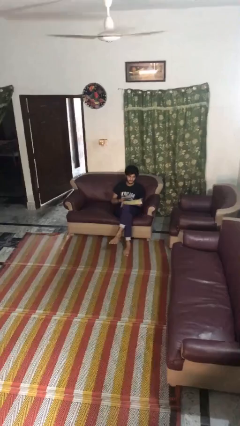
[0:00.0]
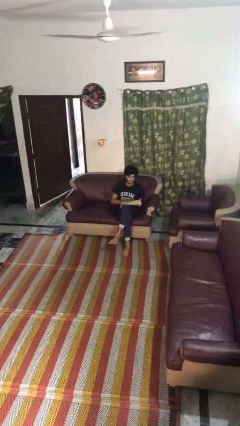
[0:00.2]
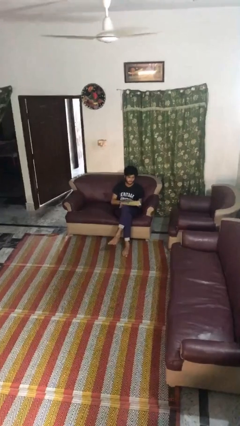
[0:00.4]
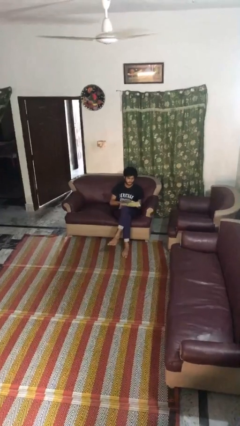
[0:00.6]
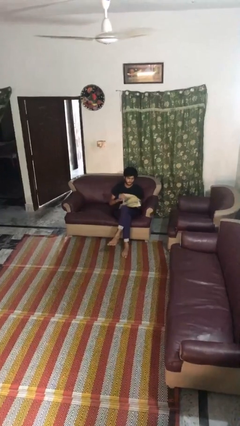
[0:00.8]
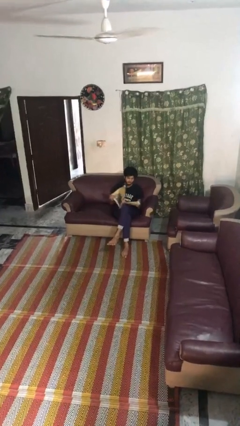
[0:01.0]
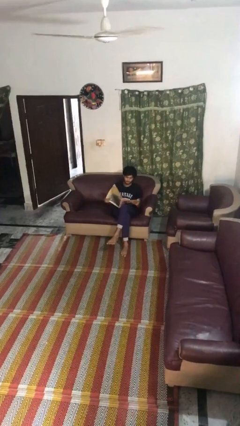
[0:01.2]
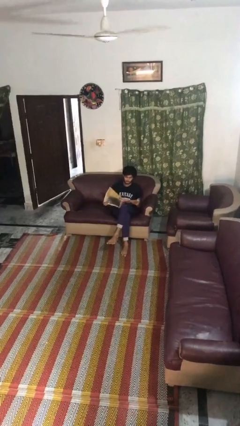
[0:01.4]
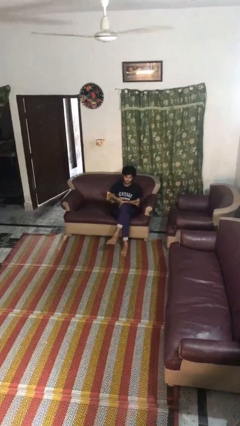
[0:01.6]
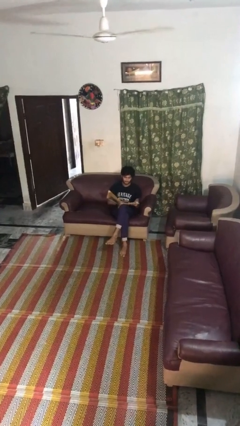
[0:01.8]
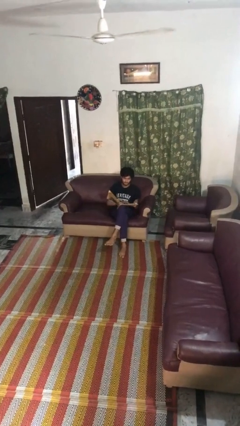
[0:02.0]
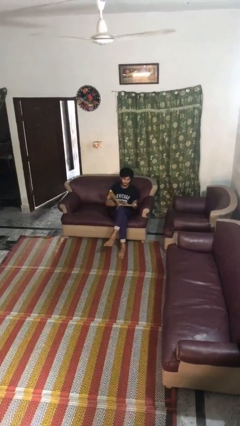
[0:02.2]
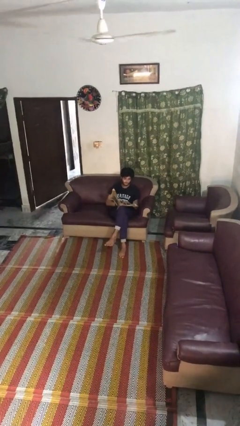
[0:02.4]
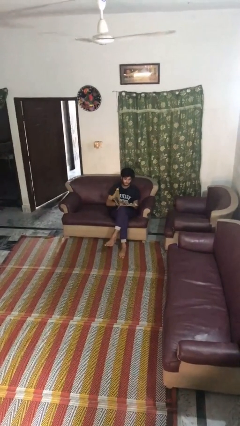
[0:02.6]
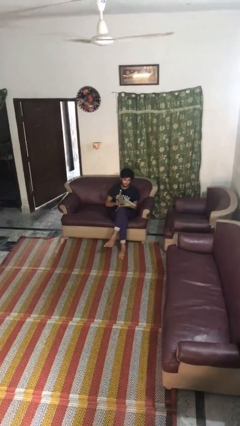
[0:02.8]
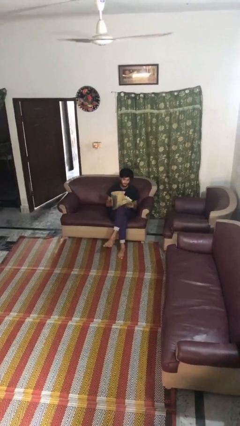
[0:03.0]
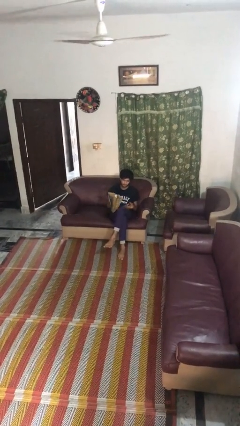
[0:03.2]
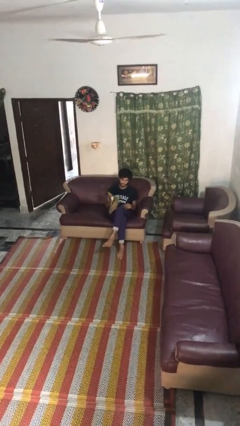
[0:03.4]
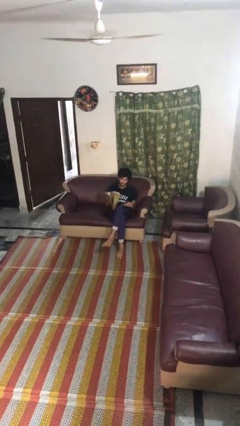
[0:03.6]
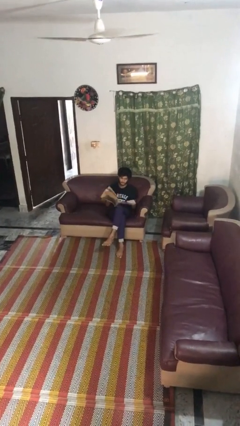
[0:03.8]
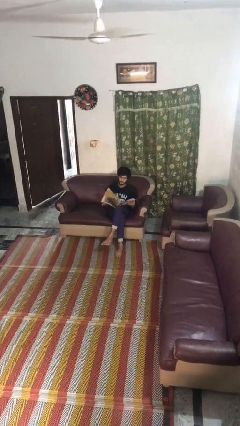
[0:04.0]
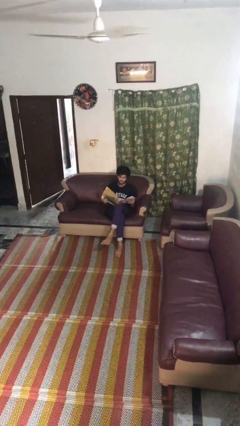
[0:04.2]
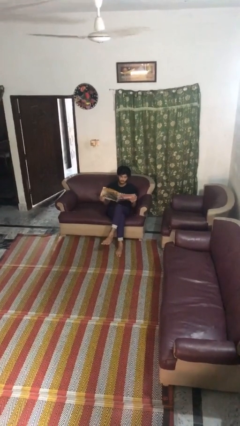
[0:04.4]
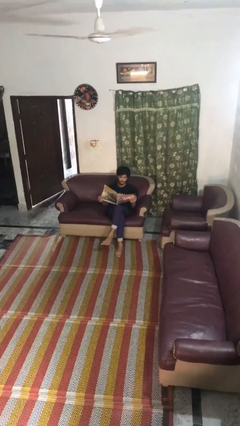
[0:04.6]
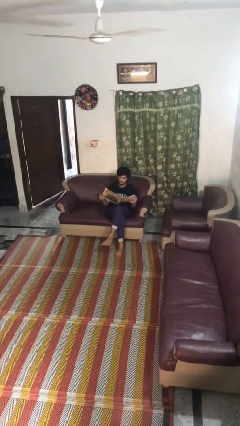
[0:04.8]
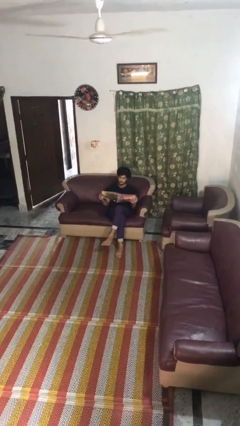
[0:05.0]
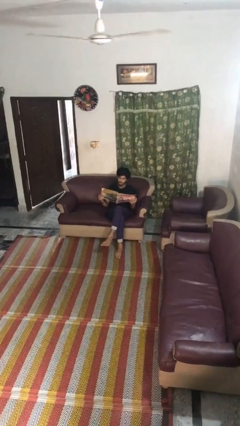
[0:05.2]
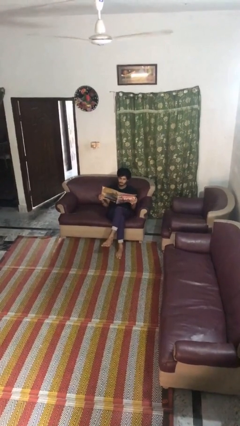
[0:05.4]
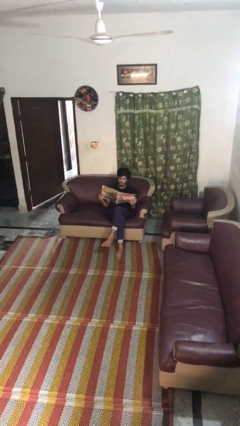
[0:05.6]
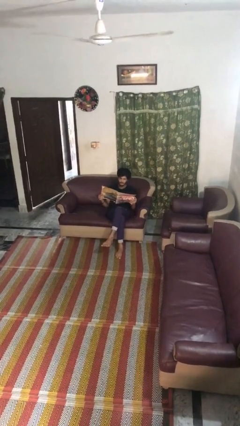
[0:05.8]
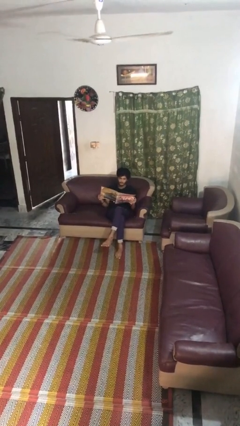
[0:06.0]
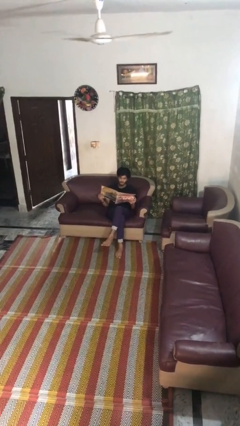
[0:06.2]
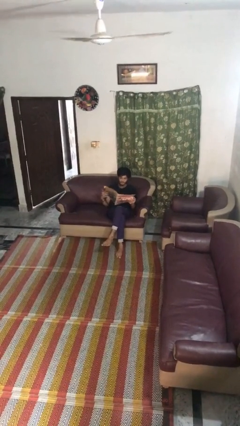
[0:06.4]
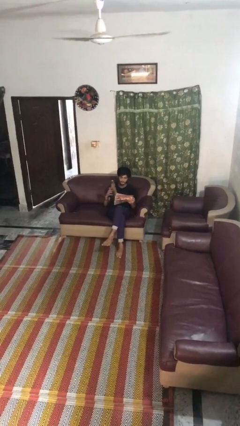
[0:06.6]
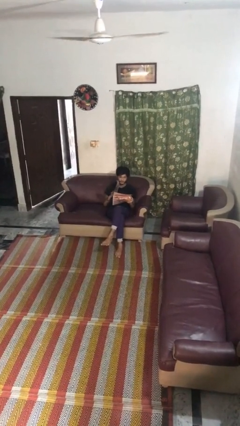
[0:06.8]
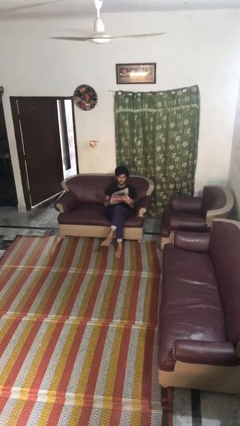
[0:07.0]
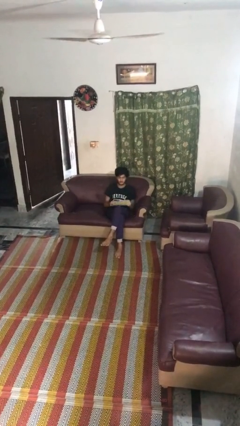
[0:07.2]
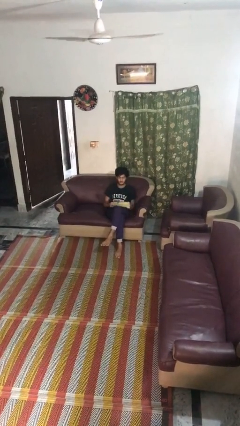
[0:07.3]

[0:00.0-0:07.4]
person reads magazine

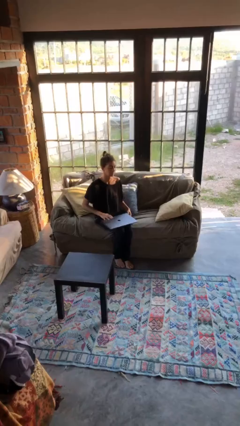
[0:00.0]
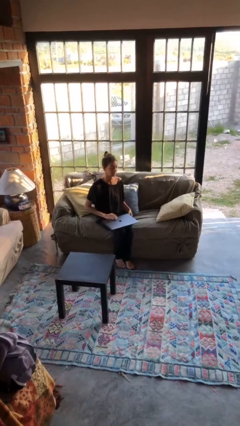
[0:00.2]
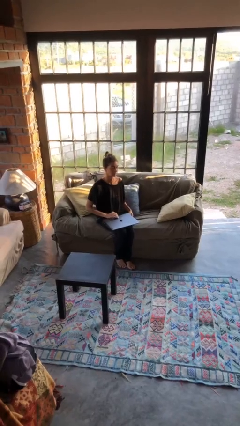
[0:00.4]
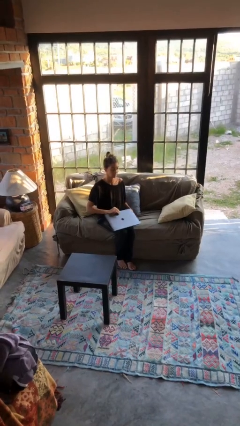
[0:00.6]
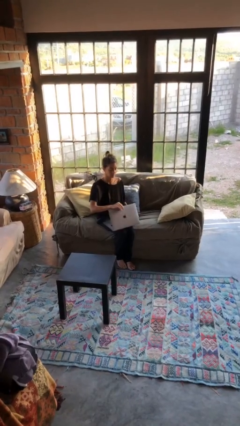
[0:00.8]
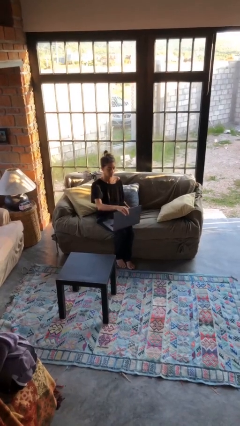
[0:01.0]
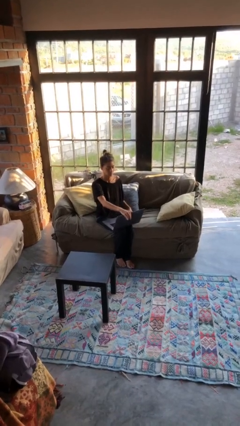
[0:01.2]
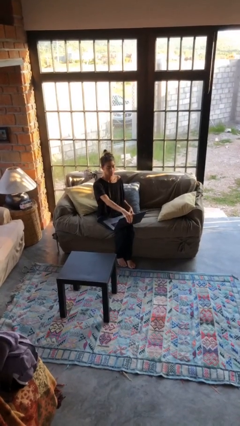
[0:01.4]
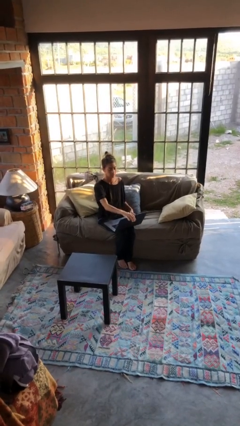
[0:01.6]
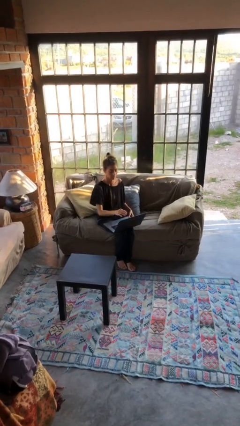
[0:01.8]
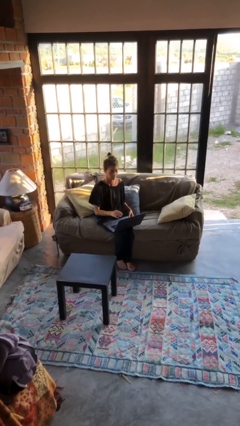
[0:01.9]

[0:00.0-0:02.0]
person opens laptop

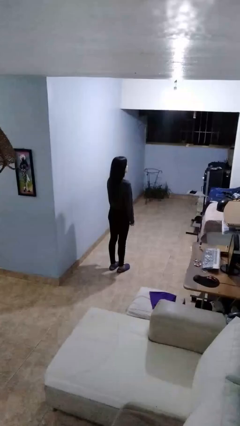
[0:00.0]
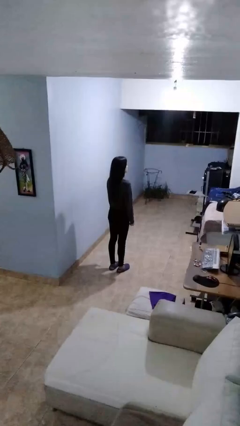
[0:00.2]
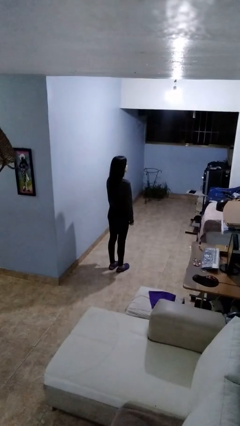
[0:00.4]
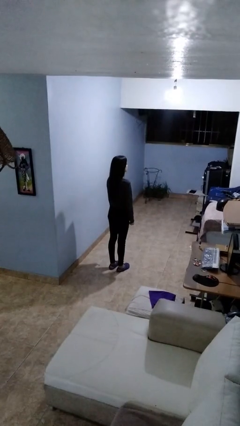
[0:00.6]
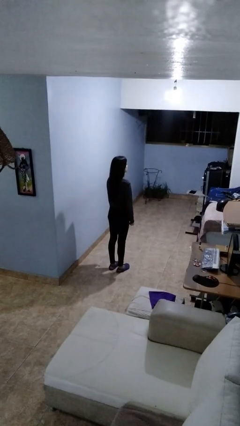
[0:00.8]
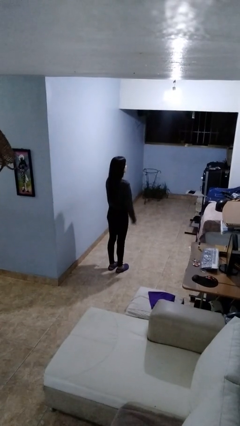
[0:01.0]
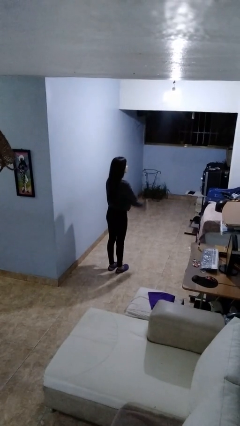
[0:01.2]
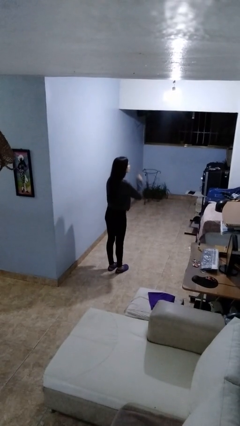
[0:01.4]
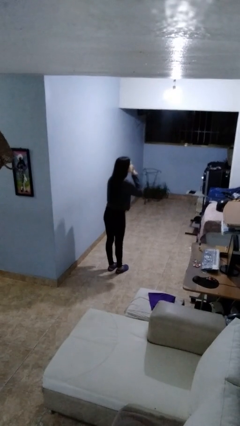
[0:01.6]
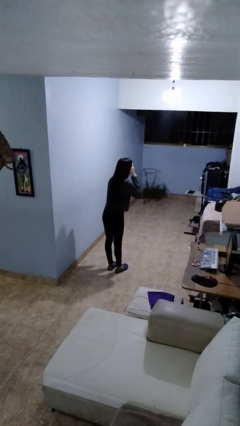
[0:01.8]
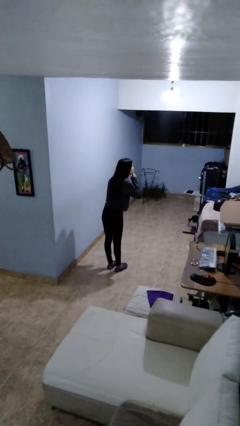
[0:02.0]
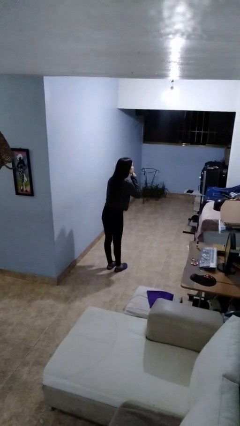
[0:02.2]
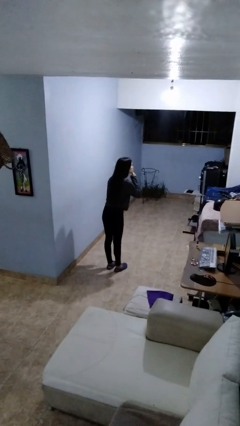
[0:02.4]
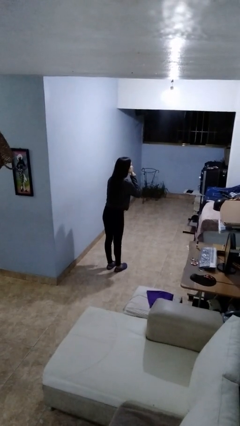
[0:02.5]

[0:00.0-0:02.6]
person gestures be quiet

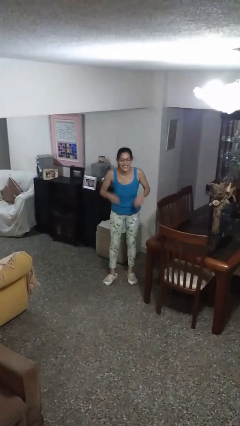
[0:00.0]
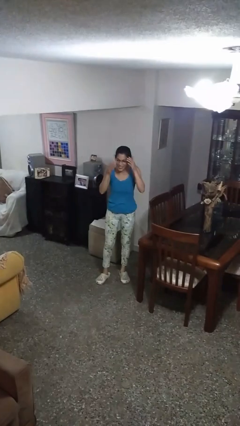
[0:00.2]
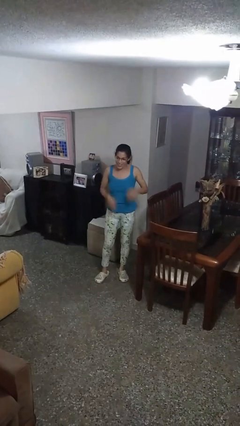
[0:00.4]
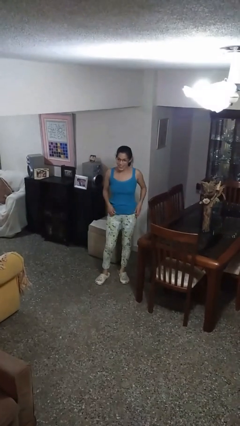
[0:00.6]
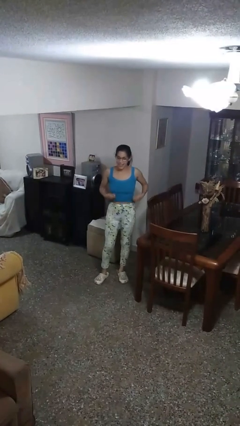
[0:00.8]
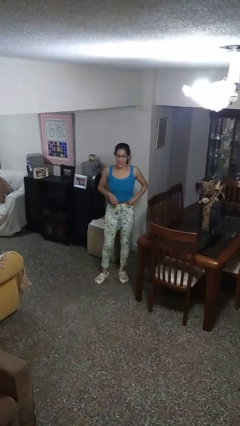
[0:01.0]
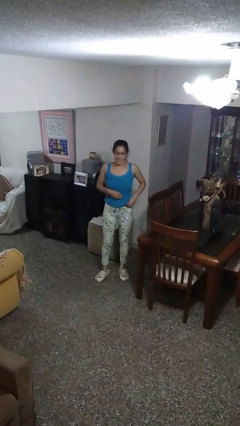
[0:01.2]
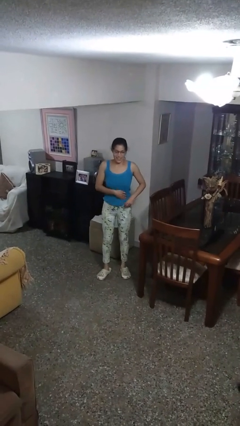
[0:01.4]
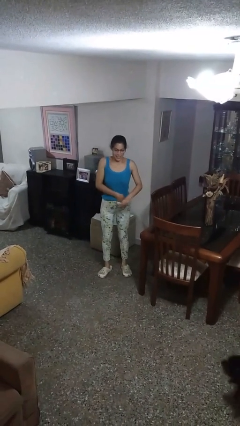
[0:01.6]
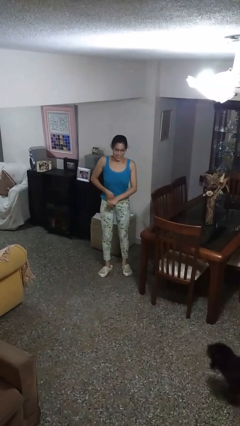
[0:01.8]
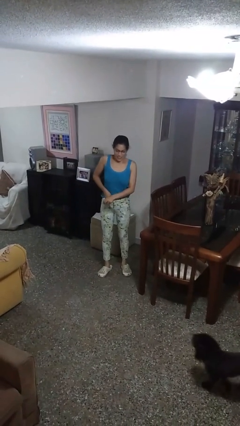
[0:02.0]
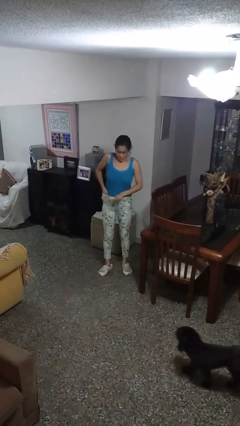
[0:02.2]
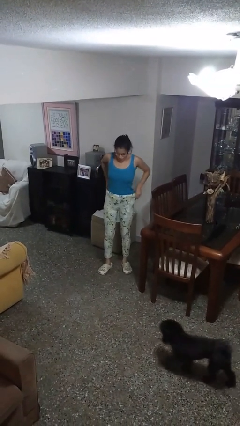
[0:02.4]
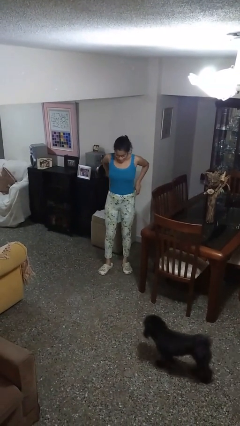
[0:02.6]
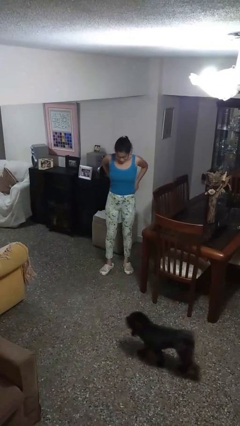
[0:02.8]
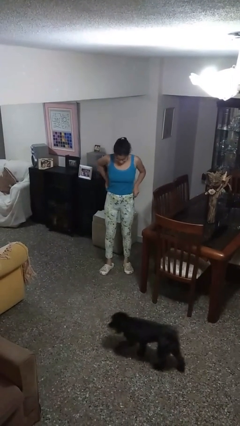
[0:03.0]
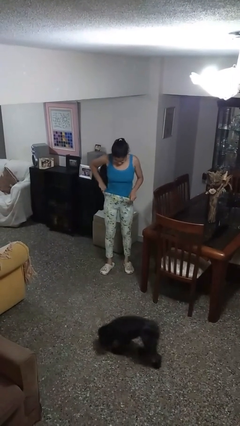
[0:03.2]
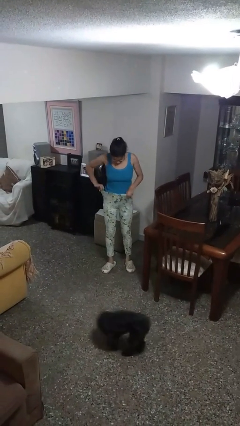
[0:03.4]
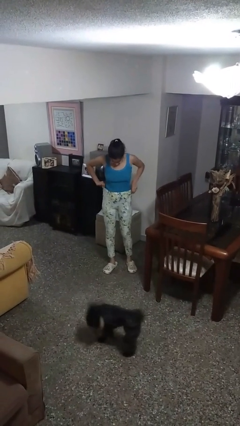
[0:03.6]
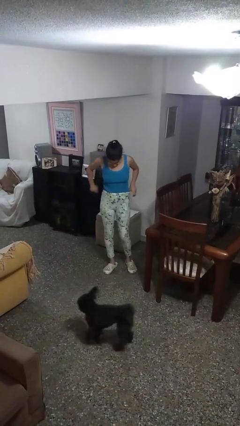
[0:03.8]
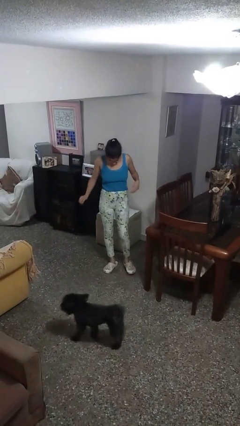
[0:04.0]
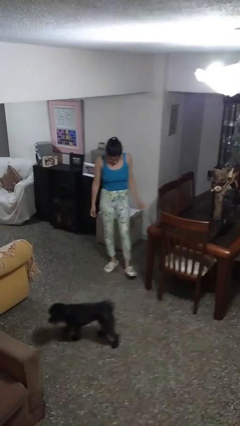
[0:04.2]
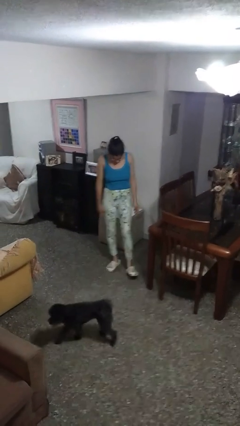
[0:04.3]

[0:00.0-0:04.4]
person tucks in shirt

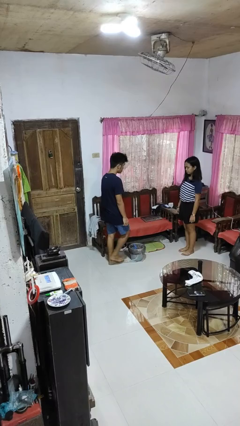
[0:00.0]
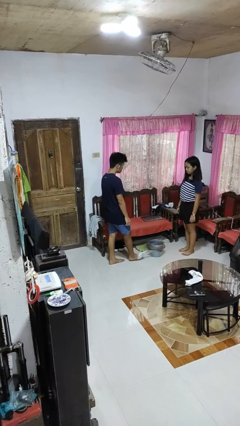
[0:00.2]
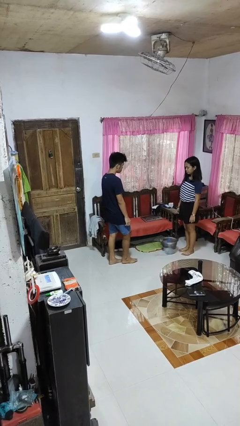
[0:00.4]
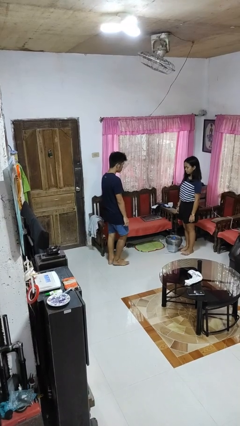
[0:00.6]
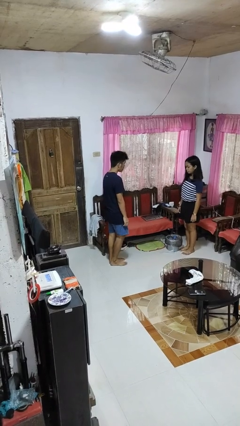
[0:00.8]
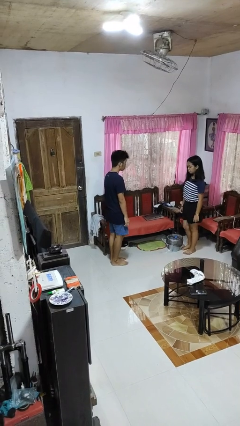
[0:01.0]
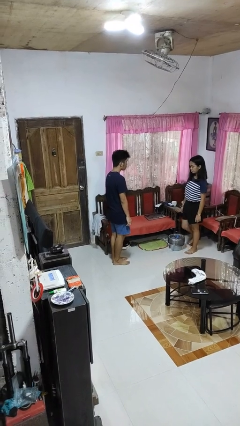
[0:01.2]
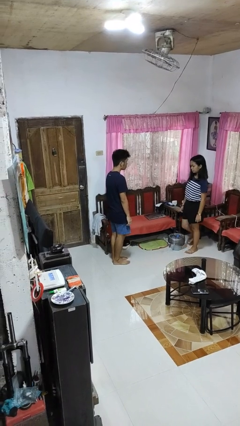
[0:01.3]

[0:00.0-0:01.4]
person kicks object to person
